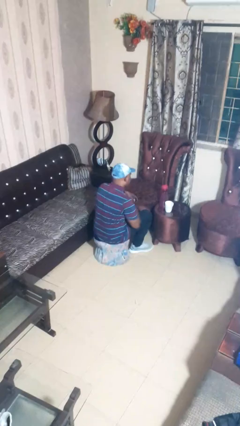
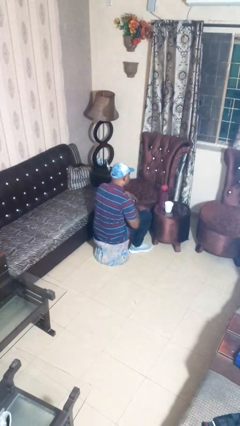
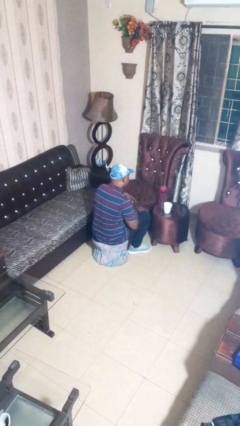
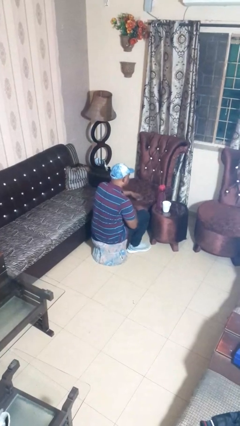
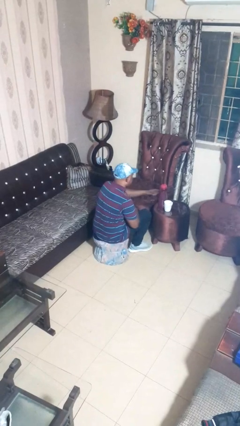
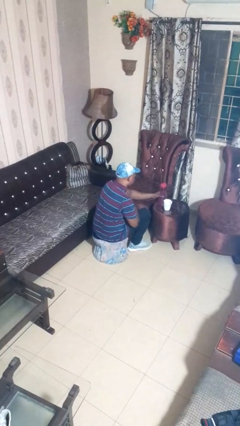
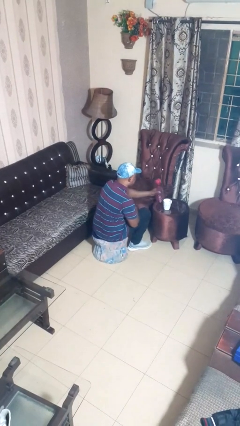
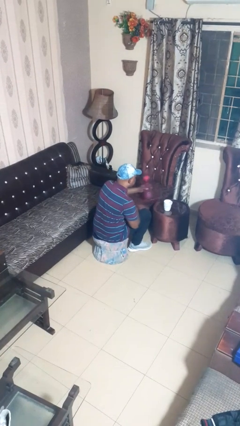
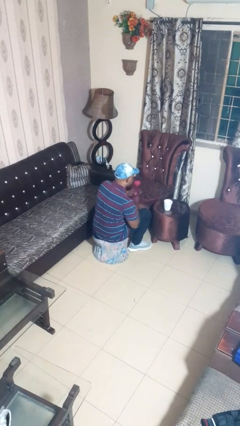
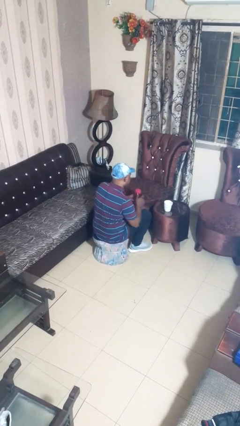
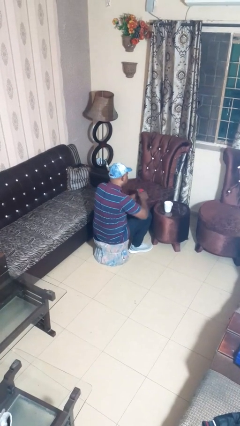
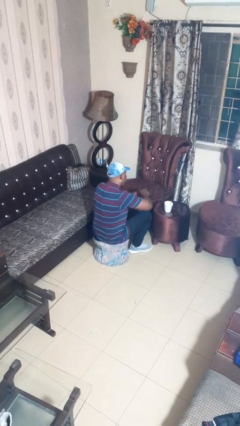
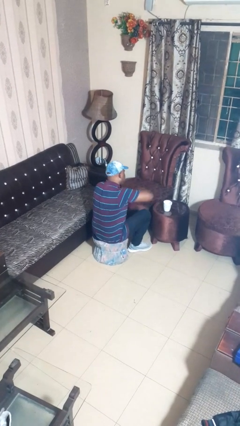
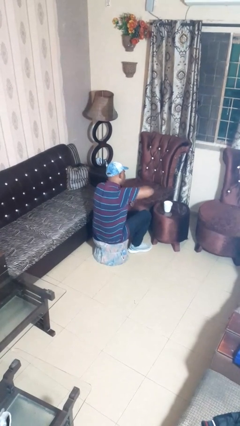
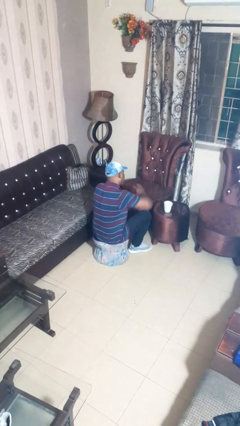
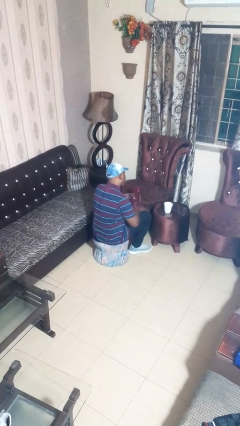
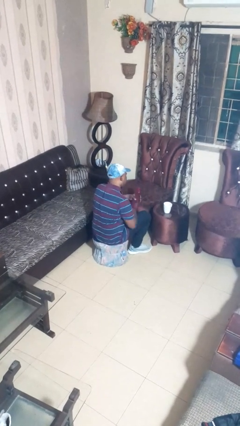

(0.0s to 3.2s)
person unscrews lid from bottle

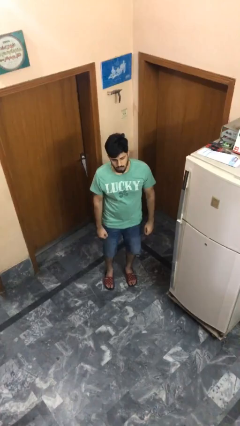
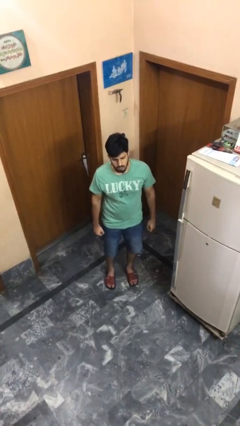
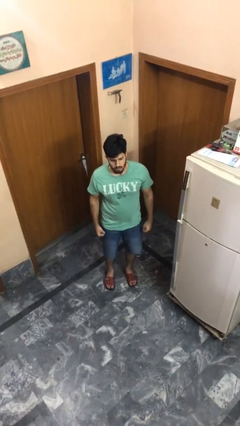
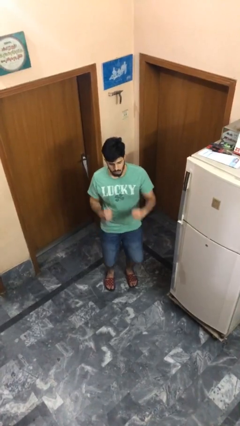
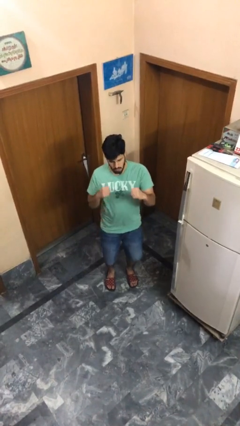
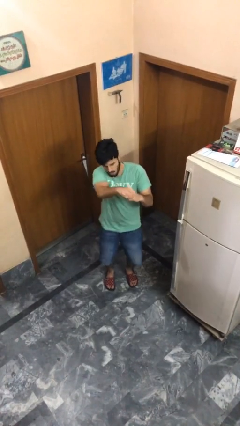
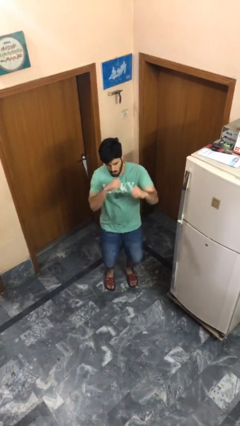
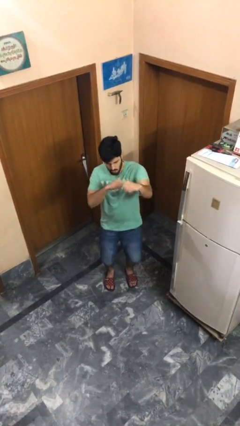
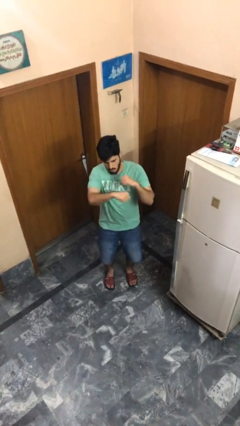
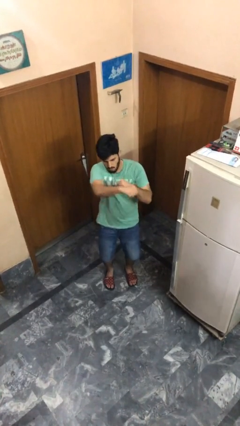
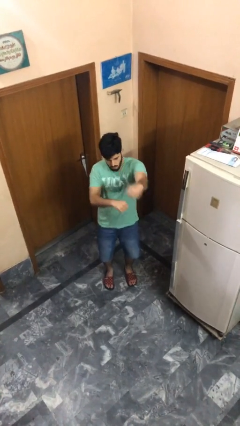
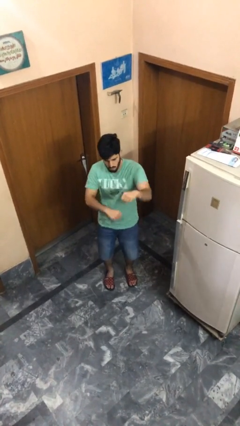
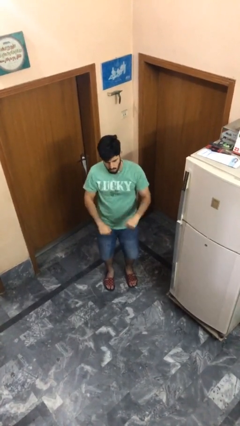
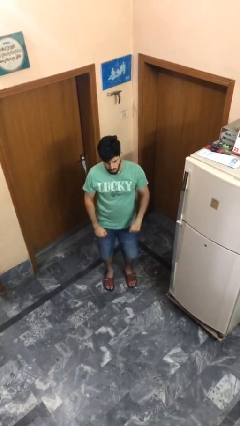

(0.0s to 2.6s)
person punches

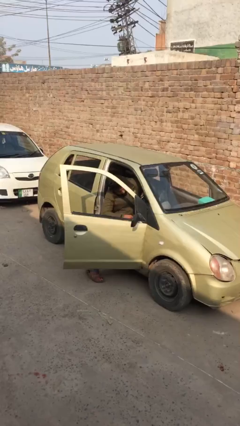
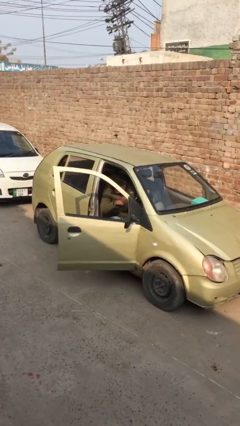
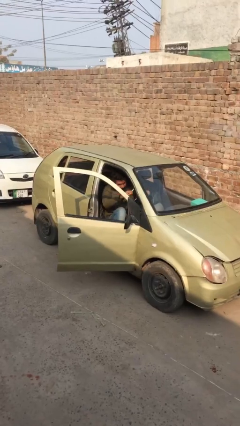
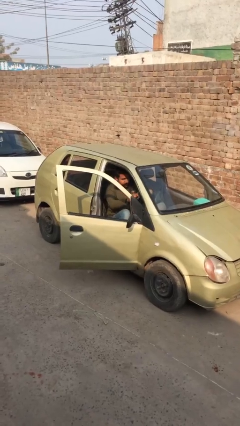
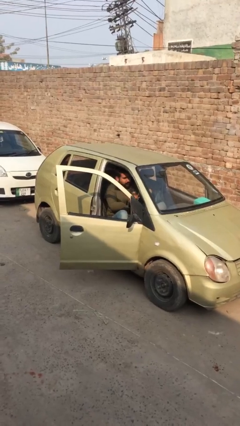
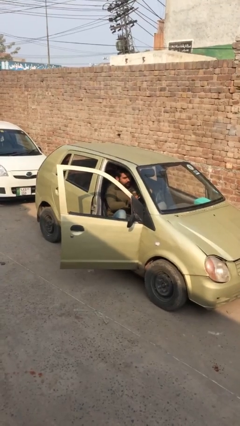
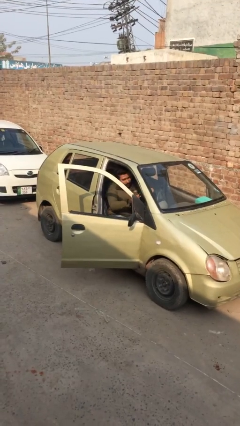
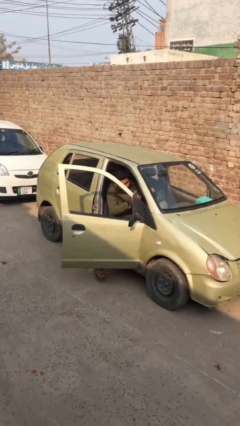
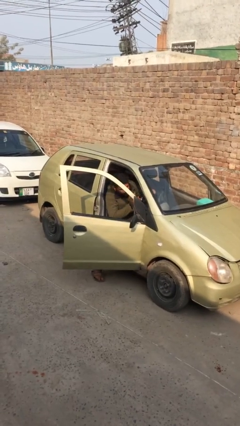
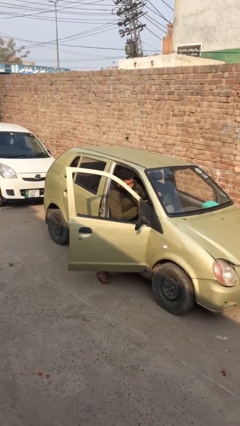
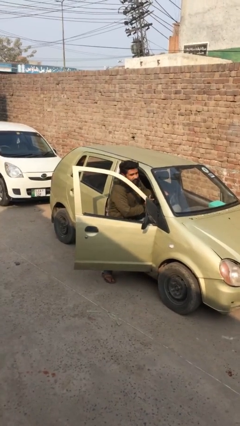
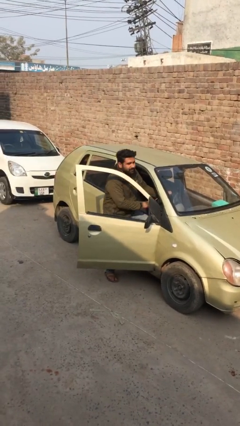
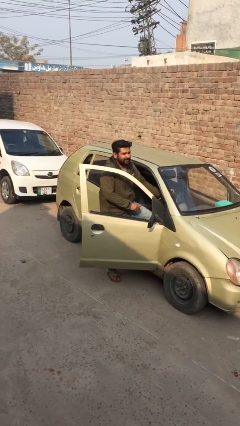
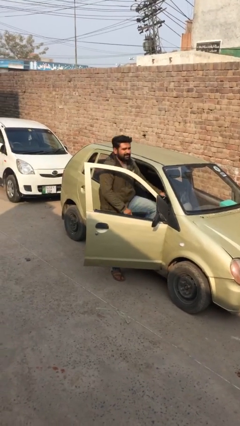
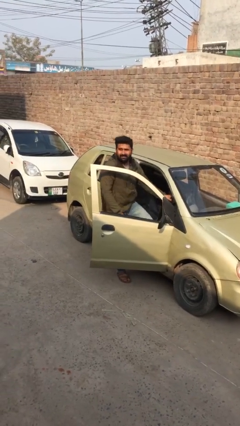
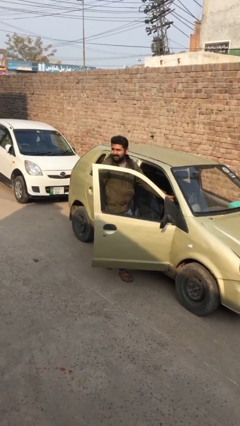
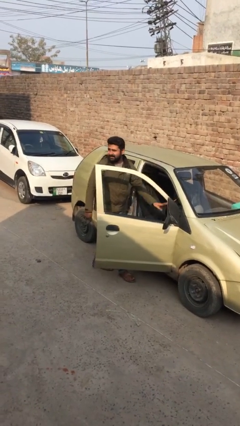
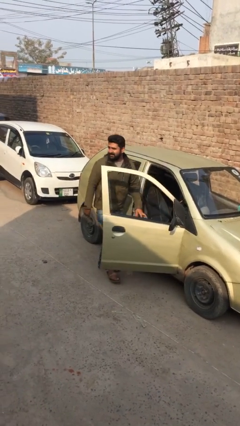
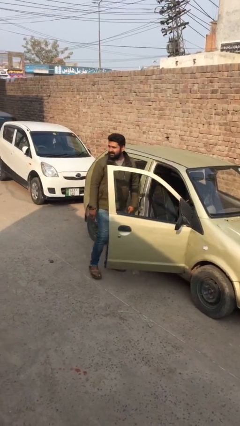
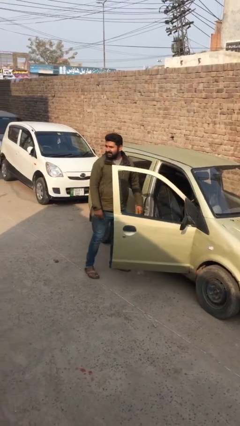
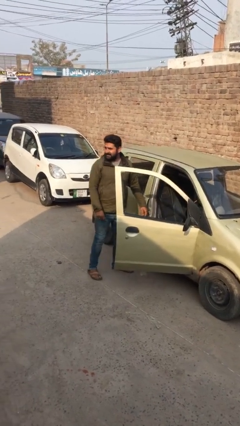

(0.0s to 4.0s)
person exits car

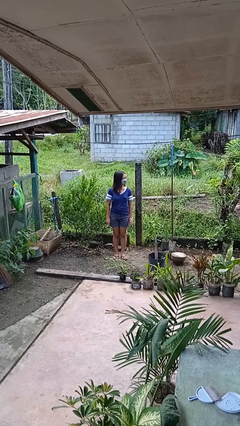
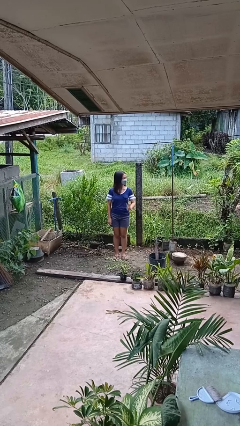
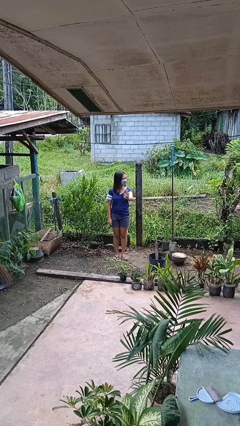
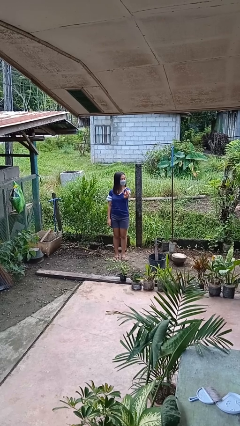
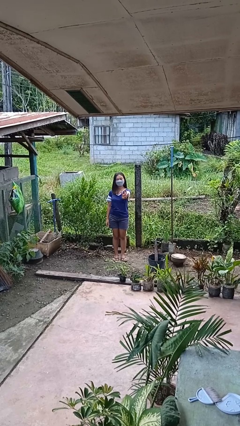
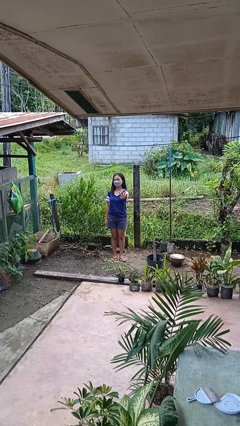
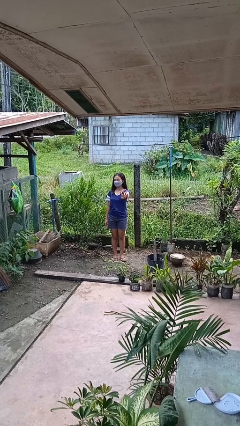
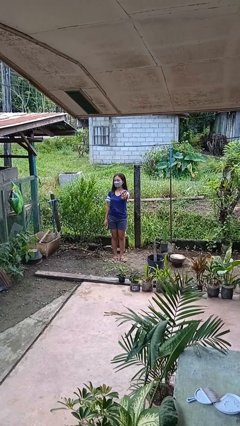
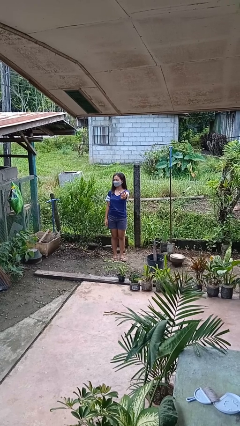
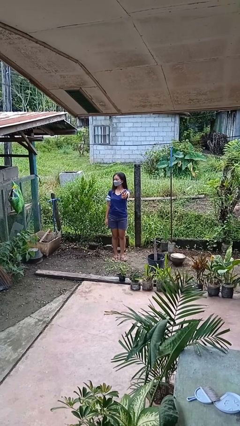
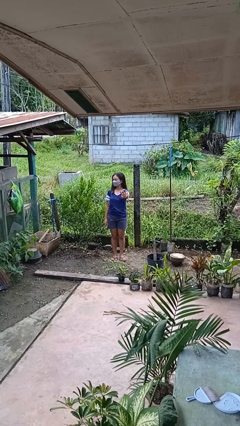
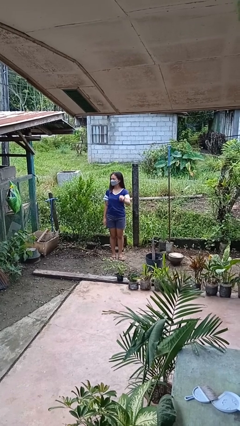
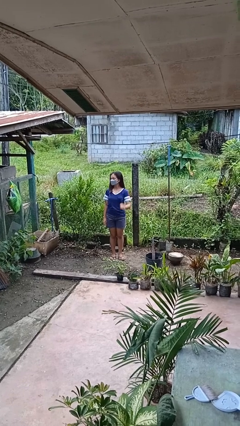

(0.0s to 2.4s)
person gestures number four

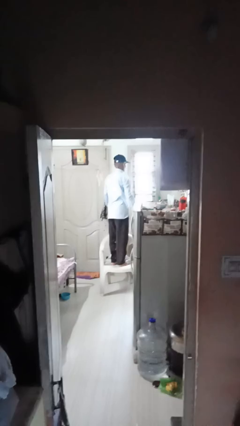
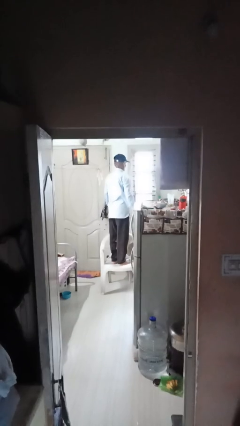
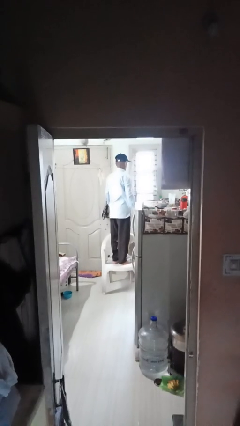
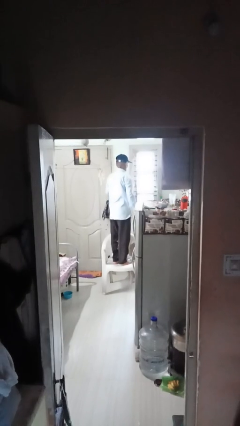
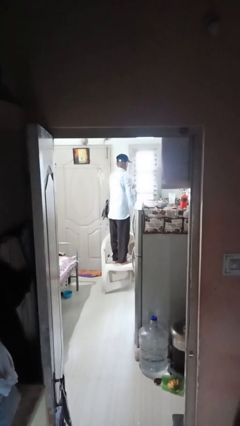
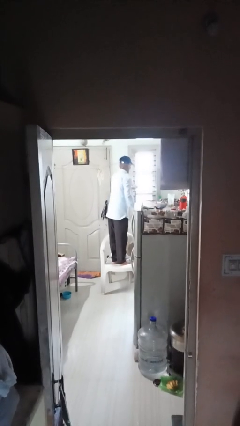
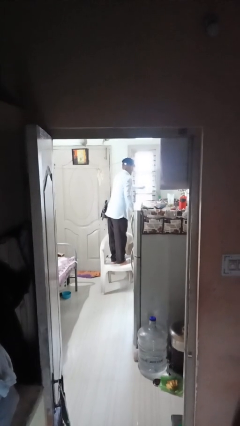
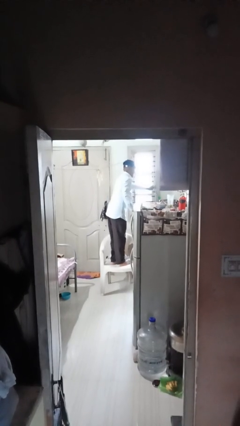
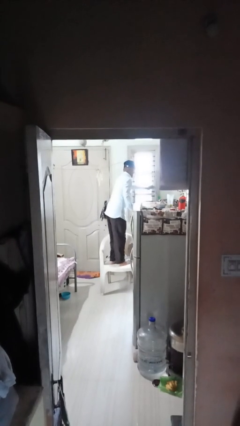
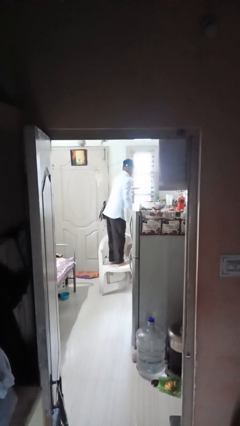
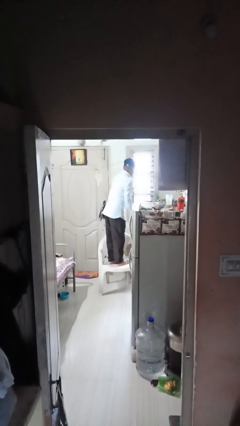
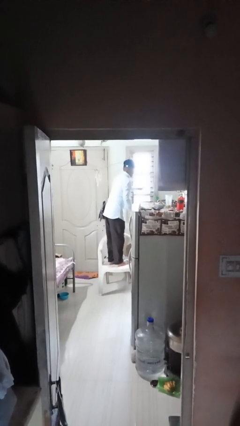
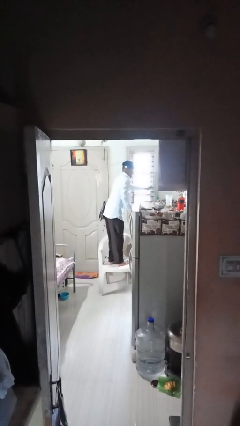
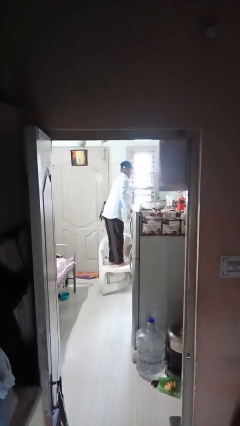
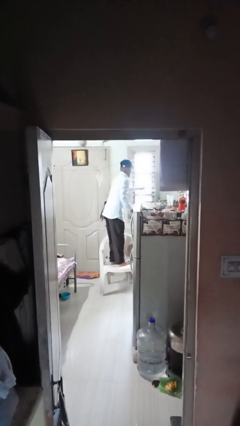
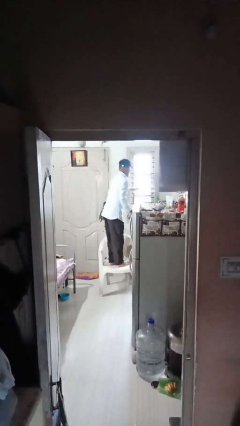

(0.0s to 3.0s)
person washes window

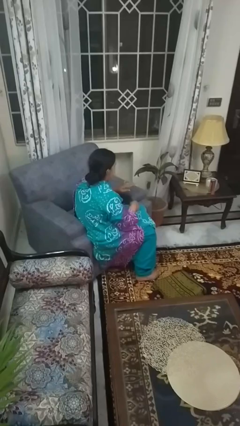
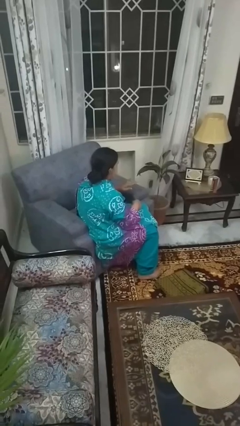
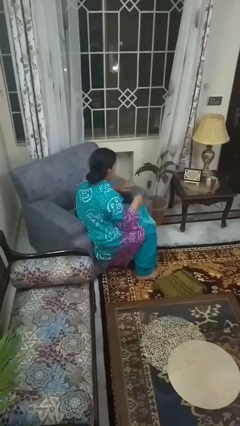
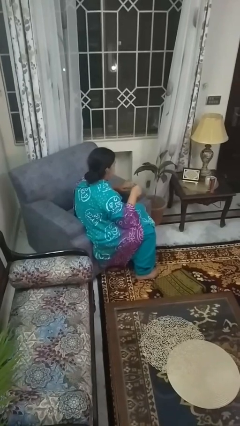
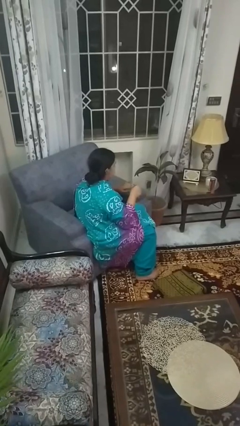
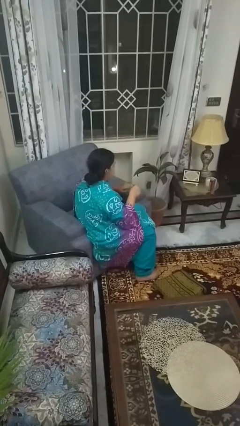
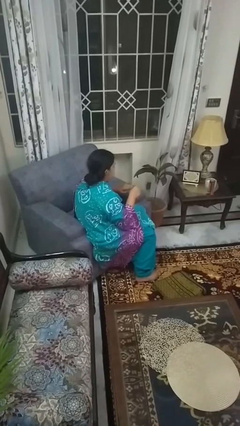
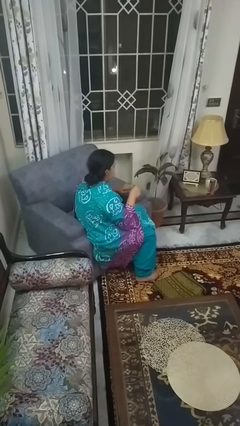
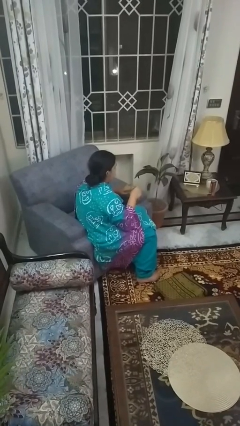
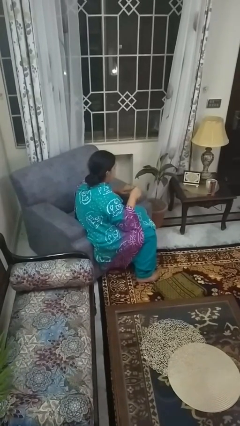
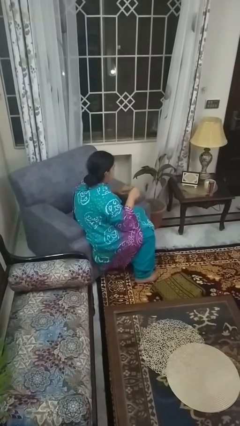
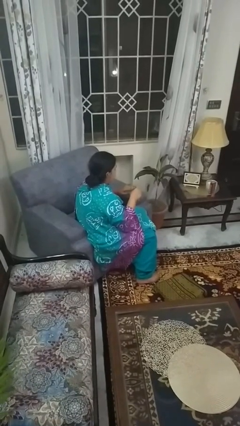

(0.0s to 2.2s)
person files fingernails

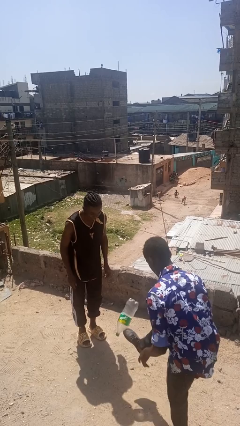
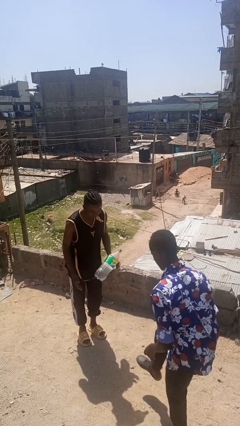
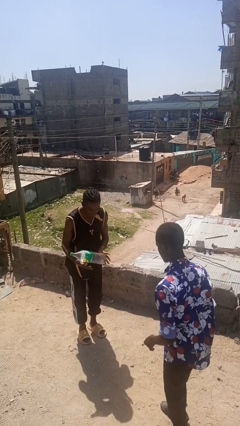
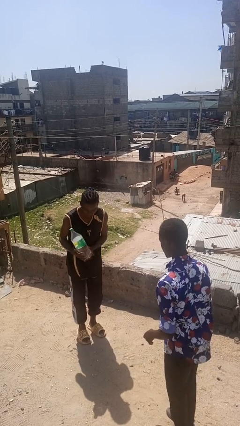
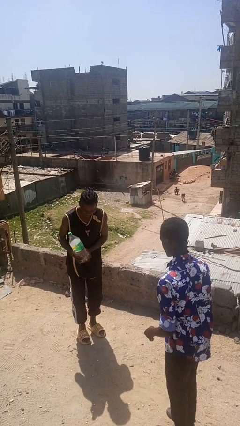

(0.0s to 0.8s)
person kicks object to person
